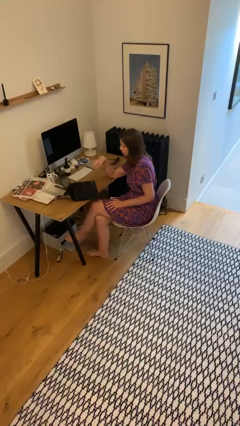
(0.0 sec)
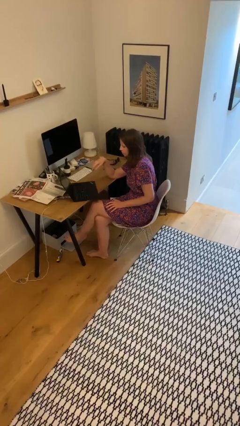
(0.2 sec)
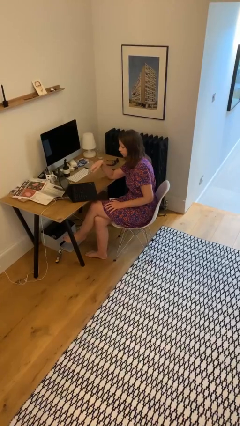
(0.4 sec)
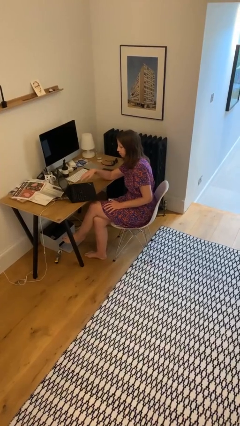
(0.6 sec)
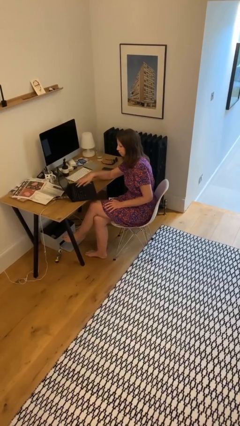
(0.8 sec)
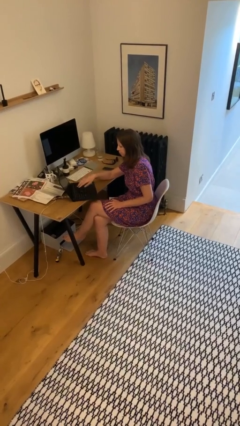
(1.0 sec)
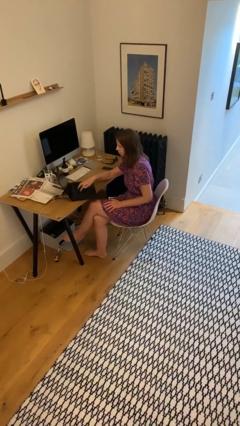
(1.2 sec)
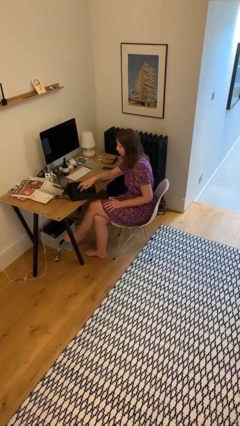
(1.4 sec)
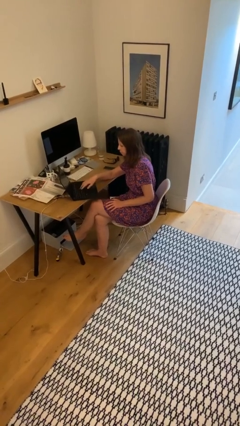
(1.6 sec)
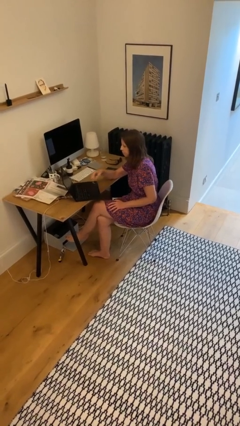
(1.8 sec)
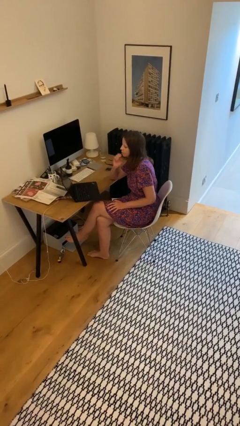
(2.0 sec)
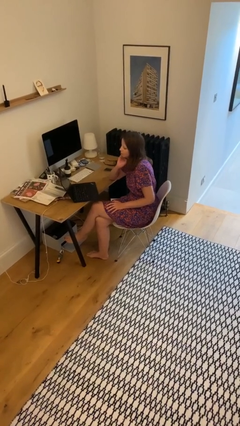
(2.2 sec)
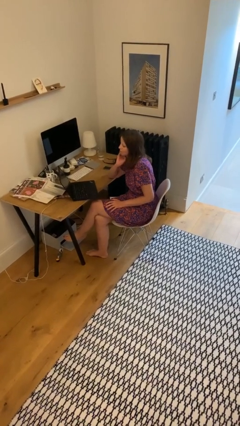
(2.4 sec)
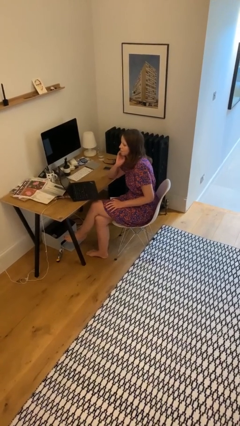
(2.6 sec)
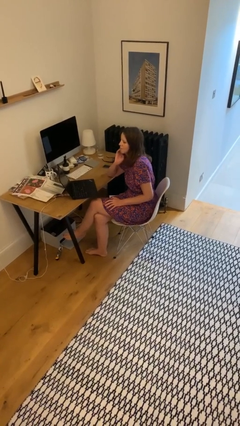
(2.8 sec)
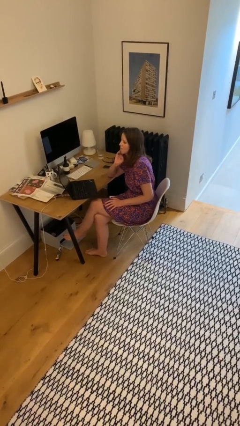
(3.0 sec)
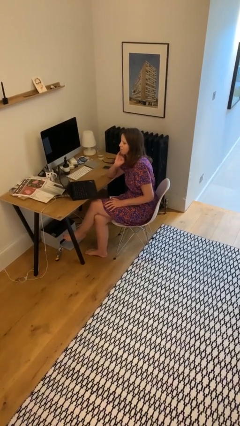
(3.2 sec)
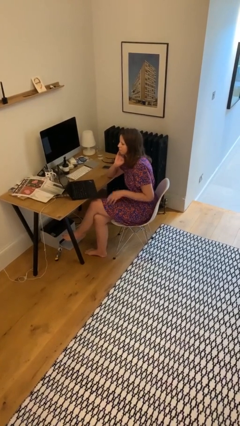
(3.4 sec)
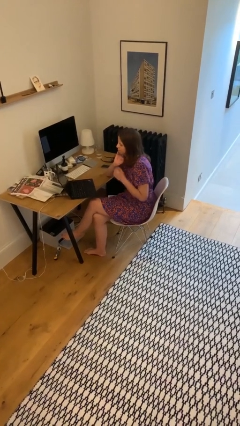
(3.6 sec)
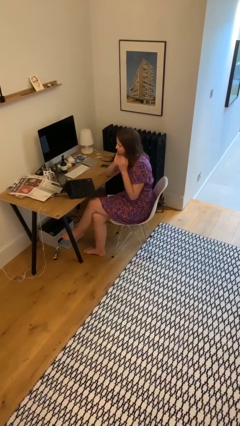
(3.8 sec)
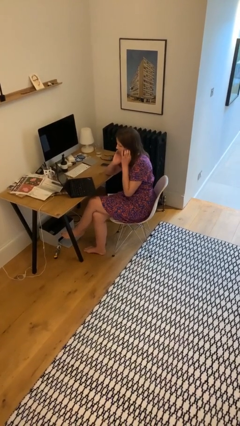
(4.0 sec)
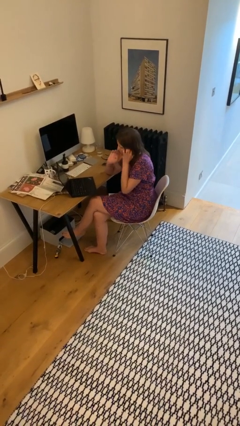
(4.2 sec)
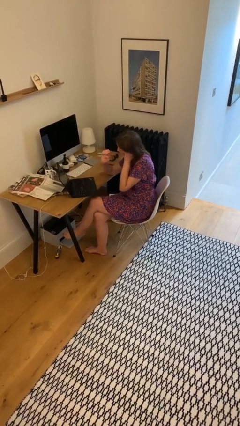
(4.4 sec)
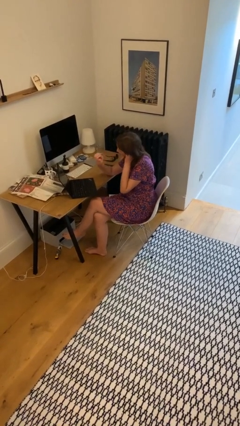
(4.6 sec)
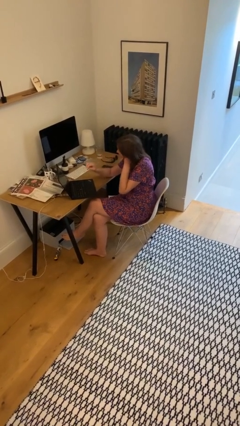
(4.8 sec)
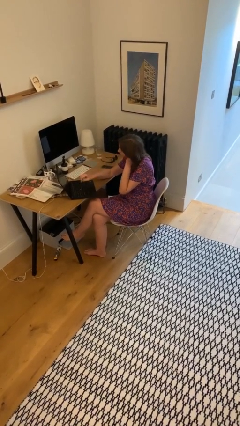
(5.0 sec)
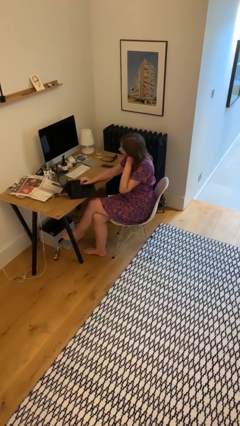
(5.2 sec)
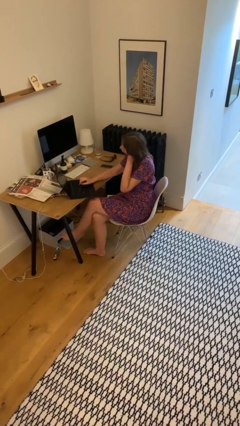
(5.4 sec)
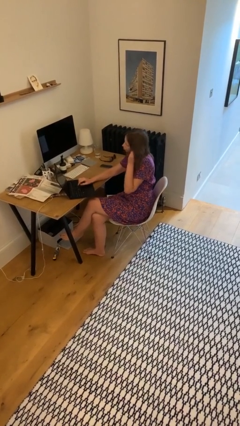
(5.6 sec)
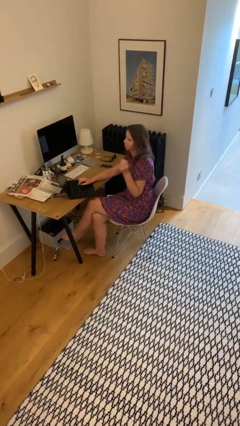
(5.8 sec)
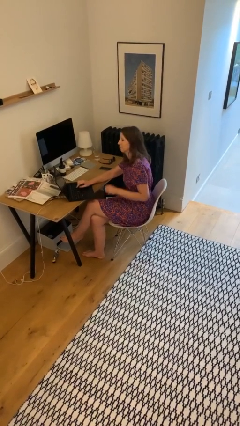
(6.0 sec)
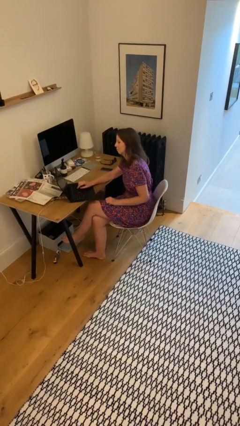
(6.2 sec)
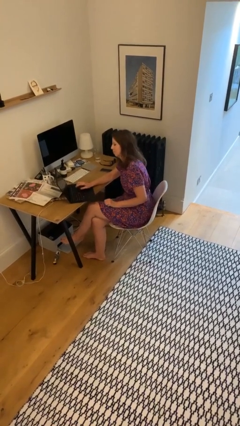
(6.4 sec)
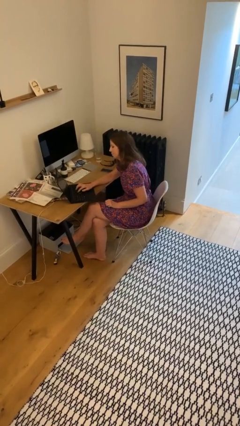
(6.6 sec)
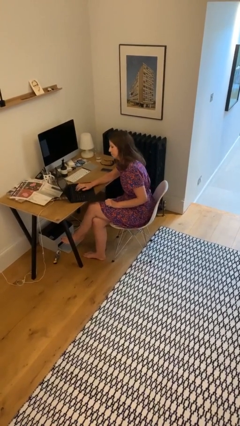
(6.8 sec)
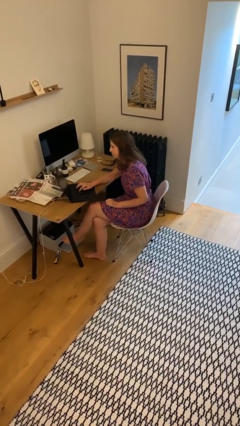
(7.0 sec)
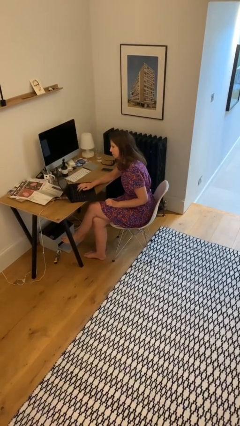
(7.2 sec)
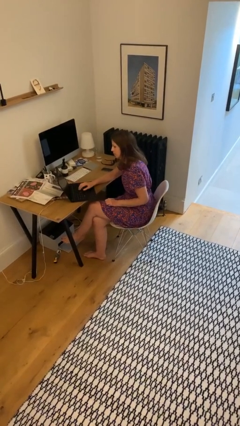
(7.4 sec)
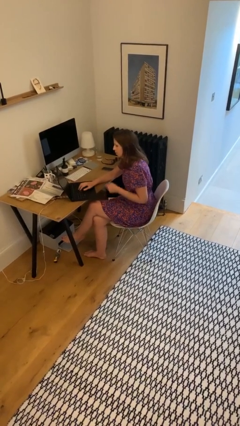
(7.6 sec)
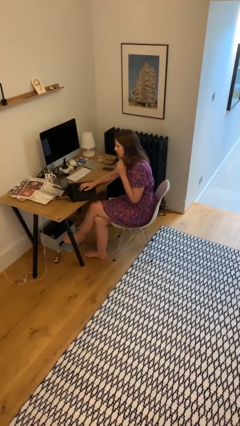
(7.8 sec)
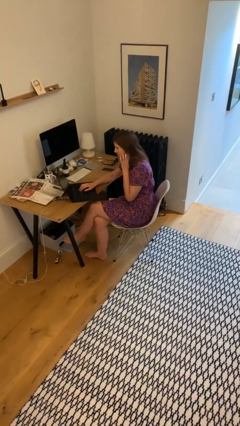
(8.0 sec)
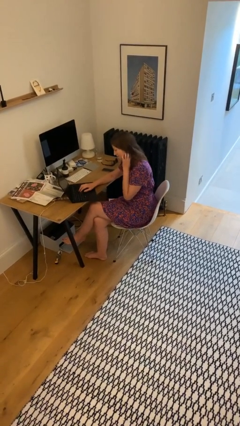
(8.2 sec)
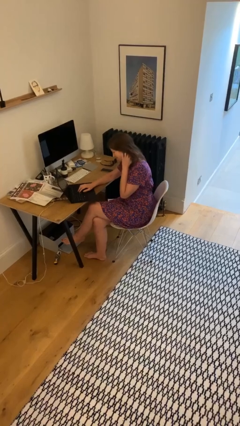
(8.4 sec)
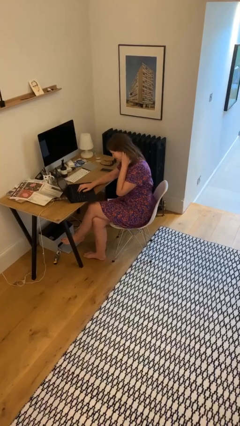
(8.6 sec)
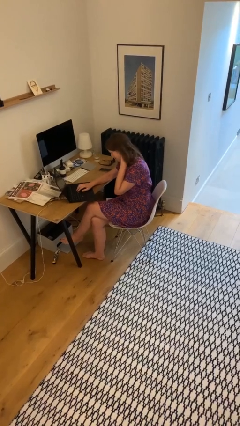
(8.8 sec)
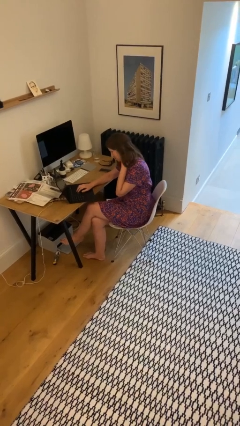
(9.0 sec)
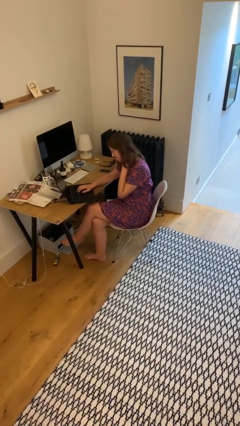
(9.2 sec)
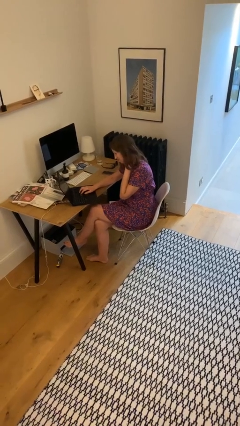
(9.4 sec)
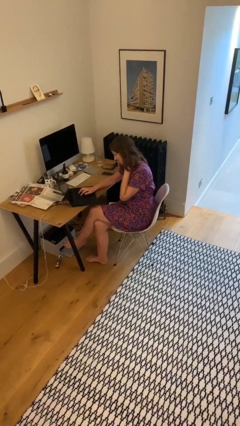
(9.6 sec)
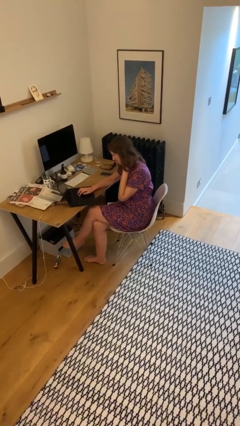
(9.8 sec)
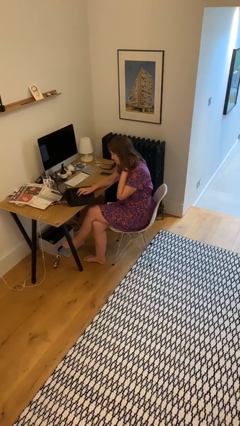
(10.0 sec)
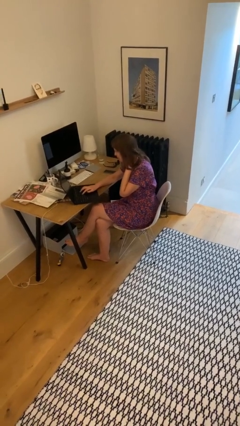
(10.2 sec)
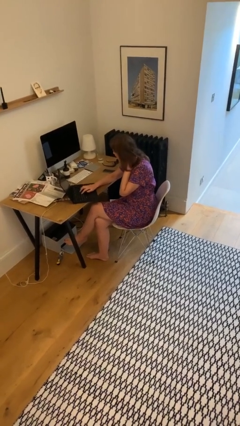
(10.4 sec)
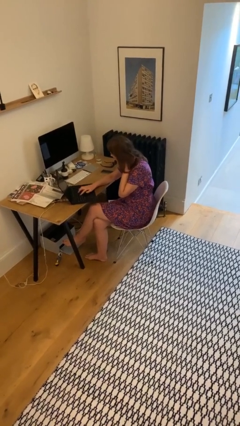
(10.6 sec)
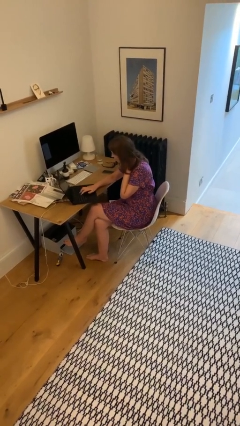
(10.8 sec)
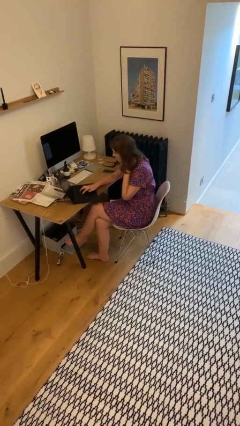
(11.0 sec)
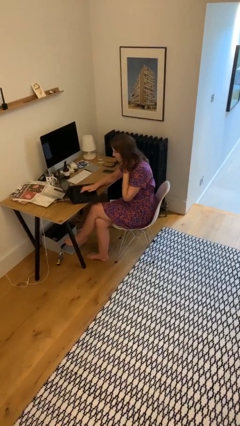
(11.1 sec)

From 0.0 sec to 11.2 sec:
person interacts with laptop

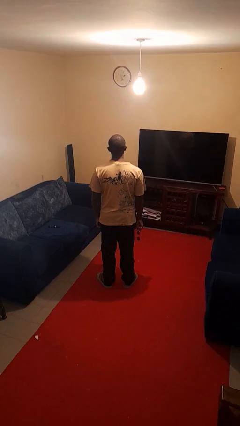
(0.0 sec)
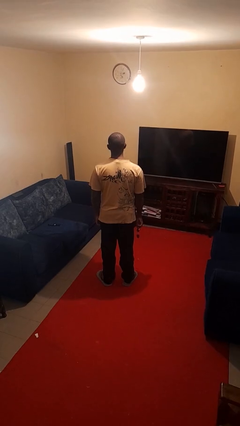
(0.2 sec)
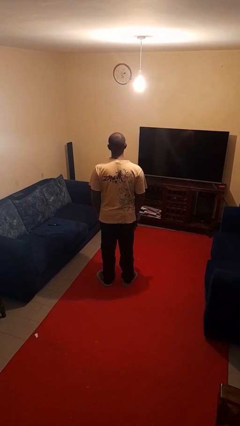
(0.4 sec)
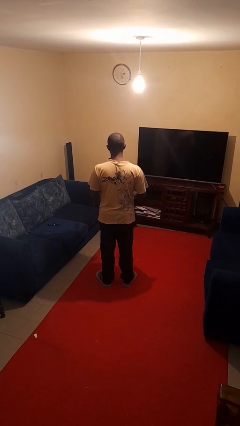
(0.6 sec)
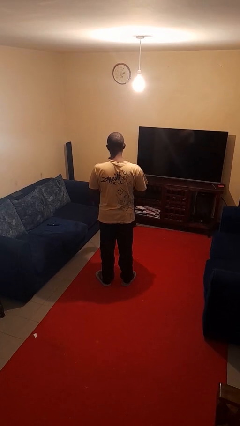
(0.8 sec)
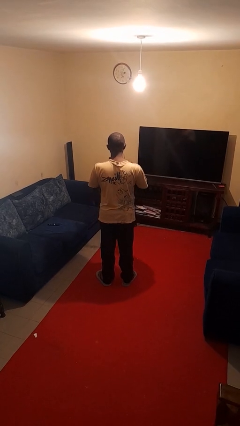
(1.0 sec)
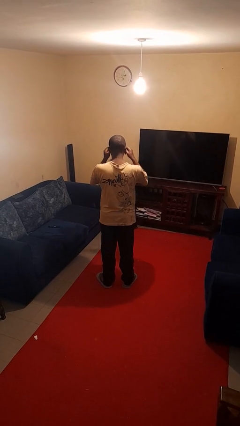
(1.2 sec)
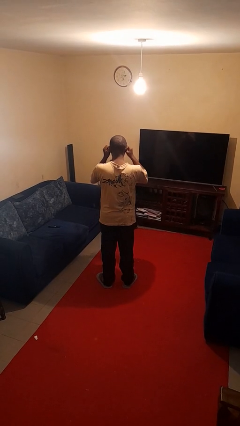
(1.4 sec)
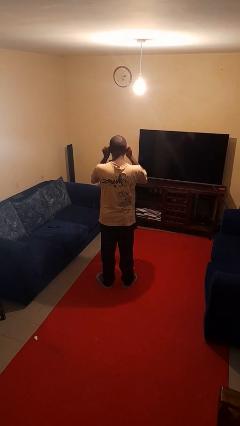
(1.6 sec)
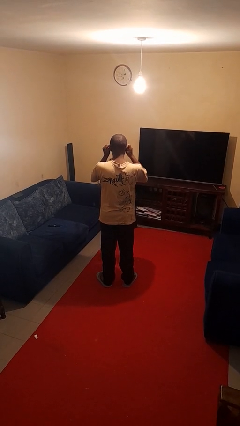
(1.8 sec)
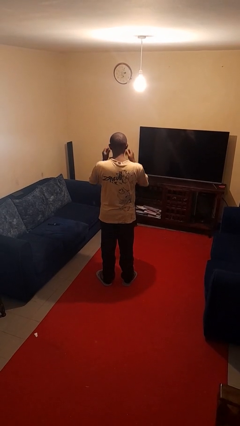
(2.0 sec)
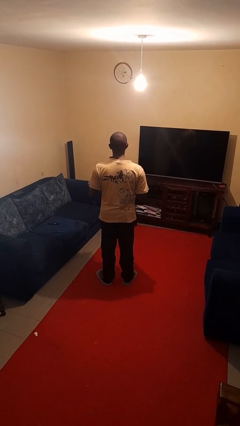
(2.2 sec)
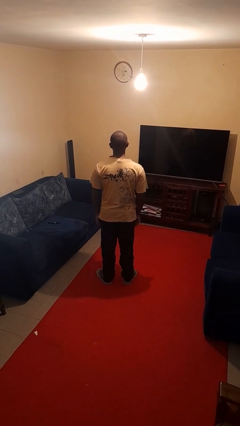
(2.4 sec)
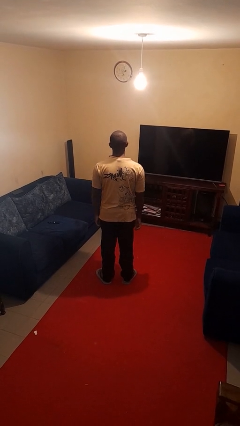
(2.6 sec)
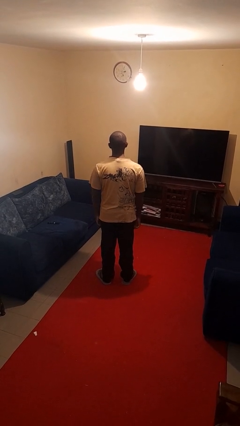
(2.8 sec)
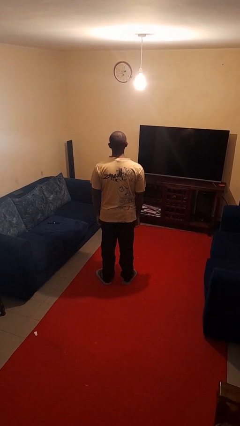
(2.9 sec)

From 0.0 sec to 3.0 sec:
person puts on sunglasses

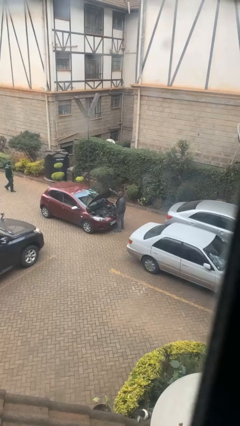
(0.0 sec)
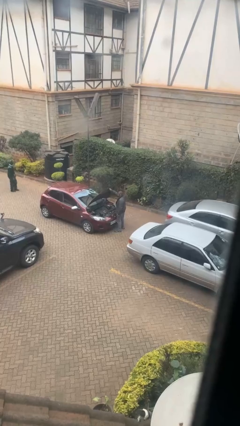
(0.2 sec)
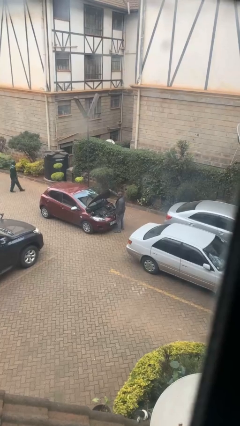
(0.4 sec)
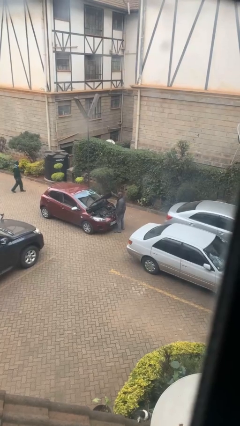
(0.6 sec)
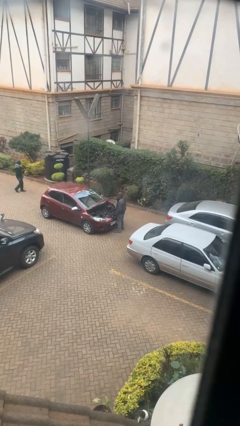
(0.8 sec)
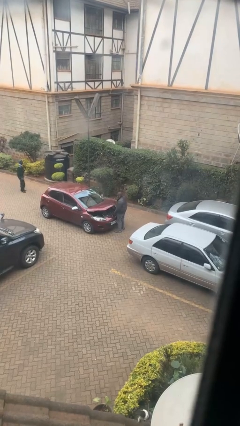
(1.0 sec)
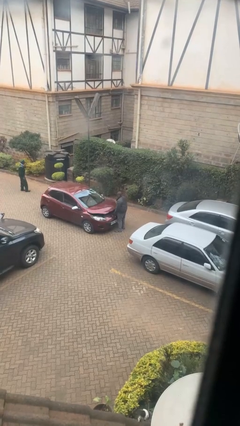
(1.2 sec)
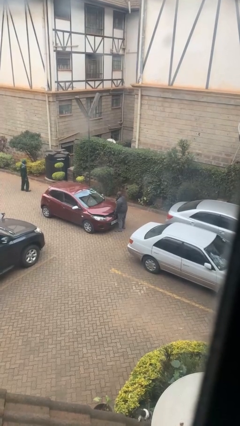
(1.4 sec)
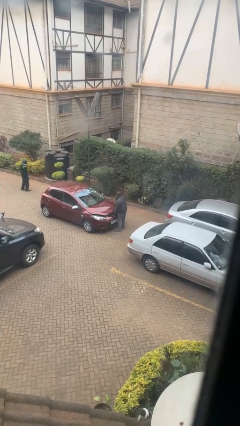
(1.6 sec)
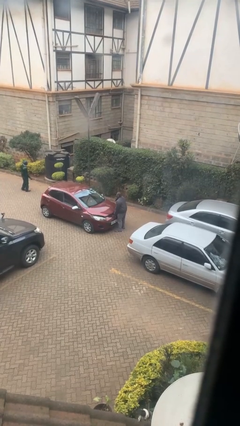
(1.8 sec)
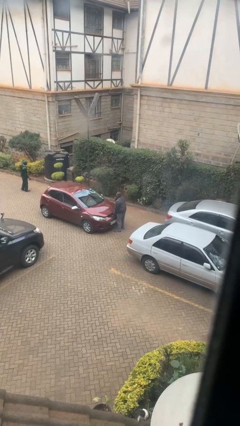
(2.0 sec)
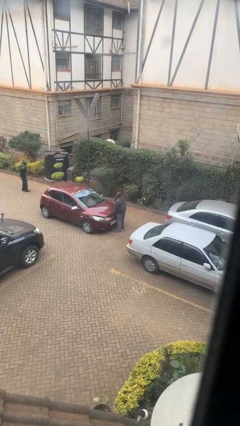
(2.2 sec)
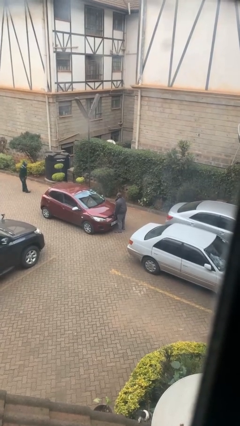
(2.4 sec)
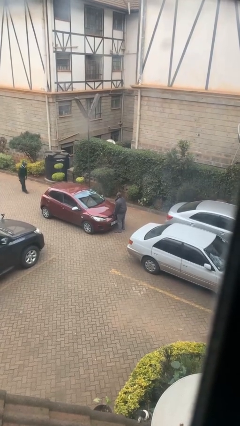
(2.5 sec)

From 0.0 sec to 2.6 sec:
person closes car hood

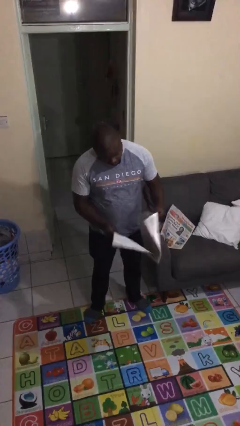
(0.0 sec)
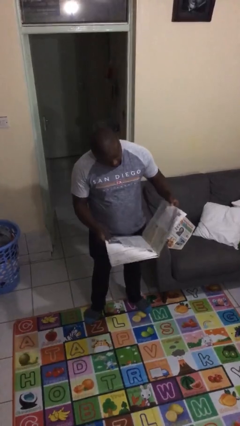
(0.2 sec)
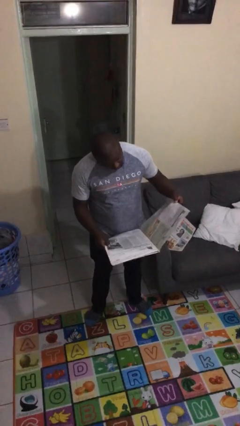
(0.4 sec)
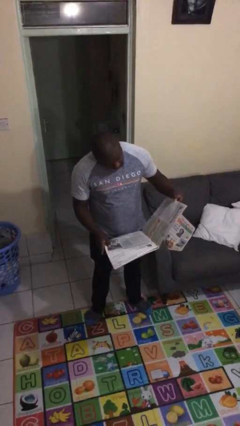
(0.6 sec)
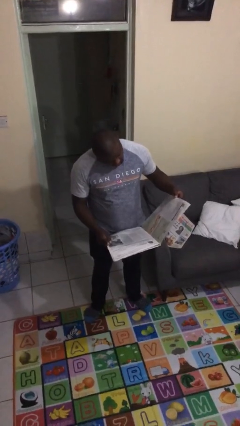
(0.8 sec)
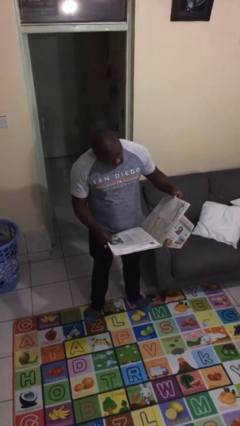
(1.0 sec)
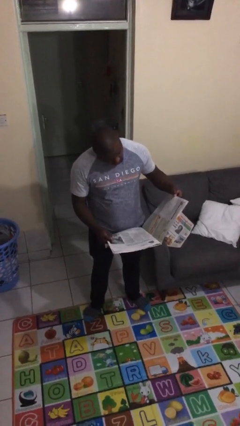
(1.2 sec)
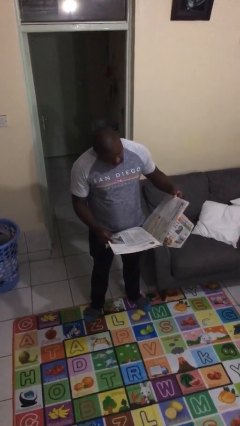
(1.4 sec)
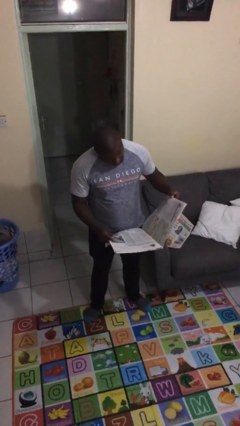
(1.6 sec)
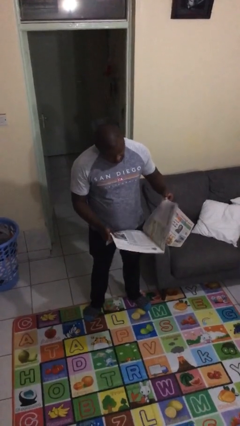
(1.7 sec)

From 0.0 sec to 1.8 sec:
person reads newspaper
